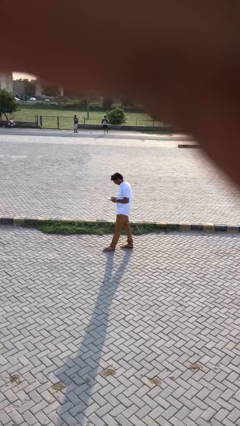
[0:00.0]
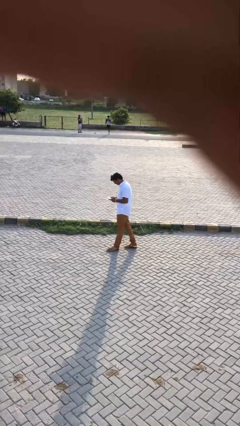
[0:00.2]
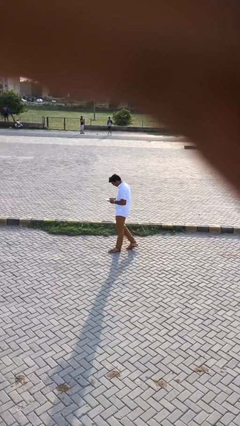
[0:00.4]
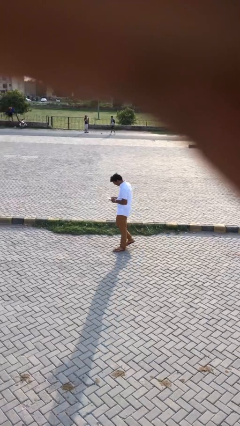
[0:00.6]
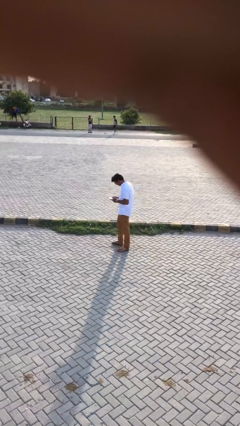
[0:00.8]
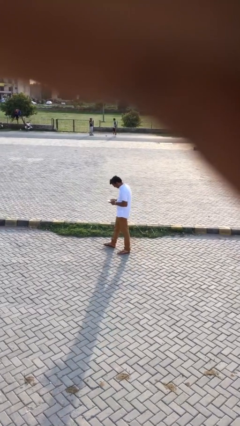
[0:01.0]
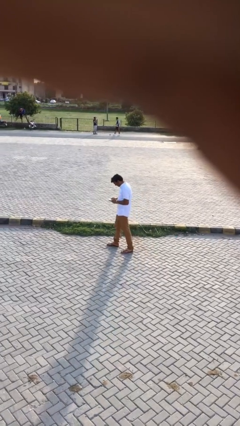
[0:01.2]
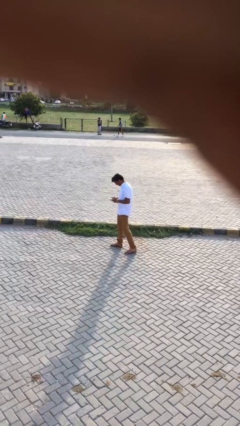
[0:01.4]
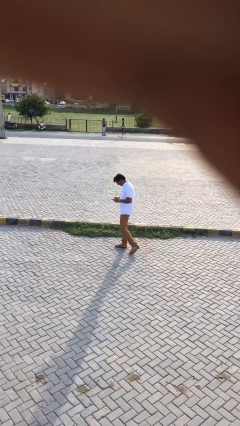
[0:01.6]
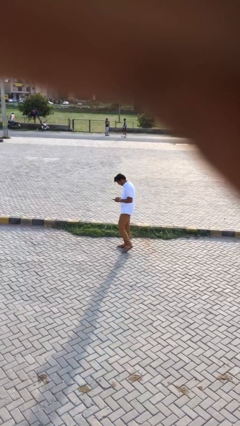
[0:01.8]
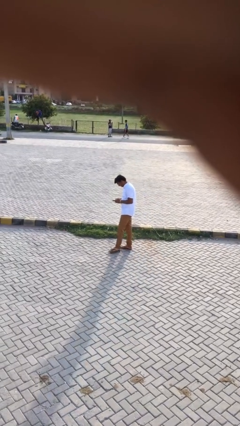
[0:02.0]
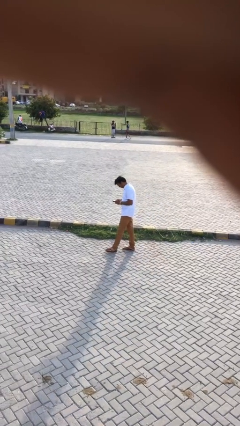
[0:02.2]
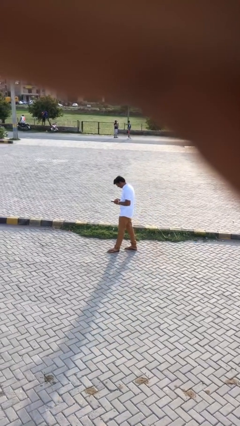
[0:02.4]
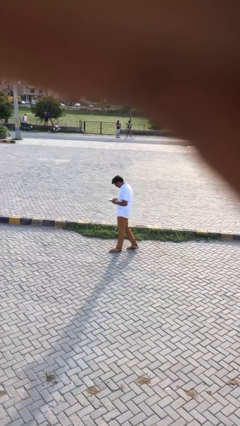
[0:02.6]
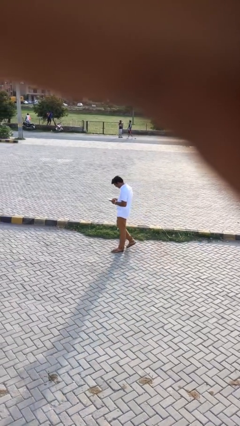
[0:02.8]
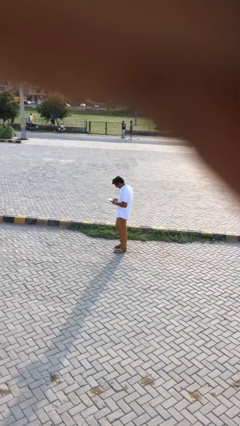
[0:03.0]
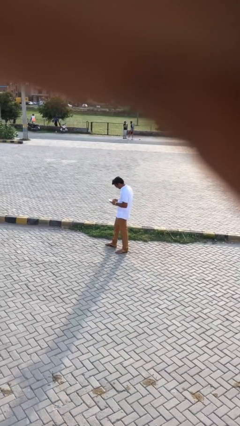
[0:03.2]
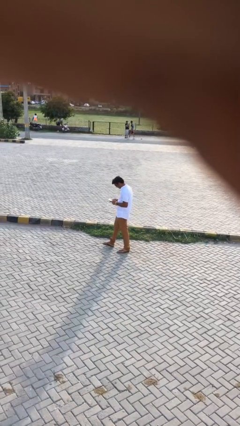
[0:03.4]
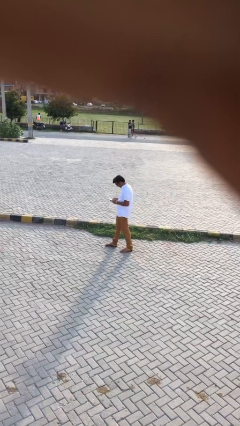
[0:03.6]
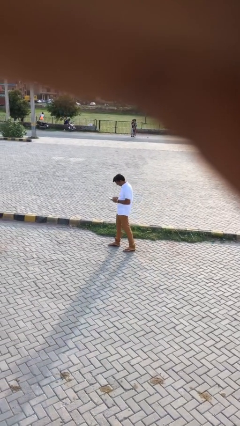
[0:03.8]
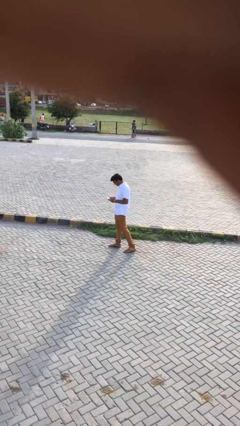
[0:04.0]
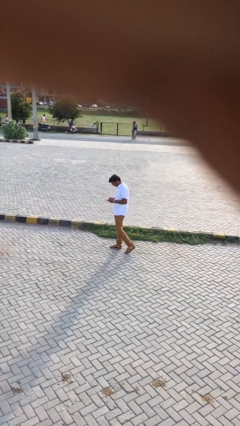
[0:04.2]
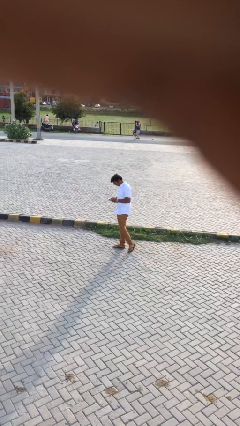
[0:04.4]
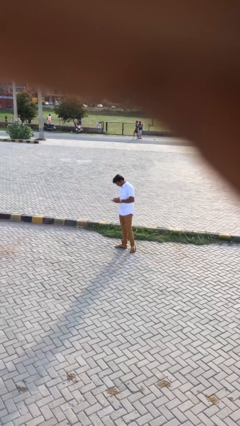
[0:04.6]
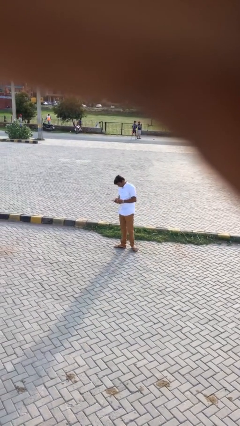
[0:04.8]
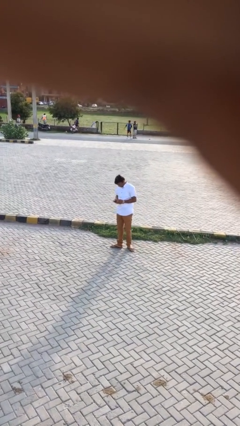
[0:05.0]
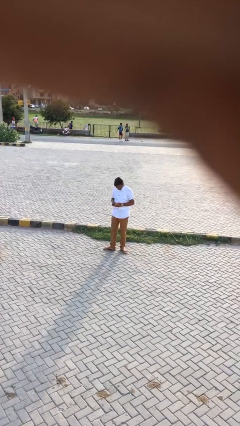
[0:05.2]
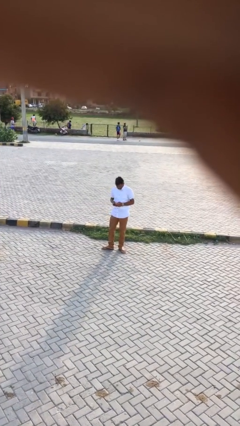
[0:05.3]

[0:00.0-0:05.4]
person texts on phone

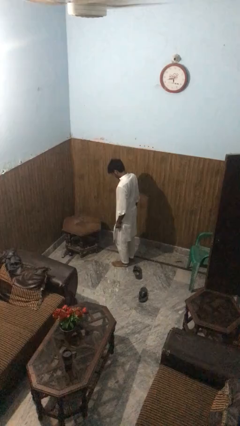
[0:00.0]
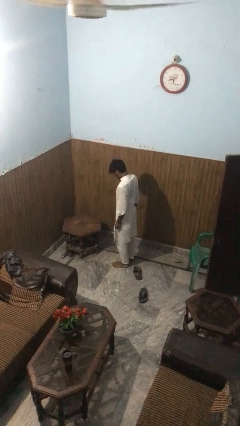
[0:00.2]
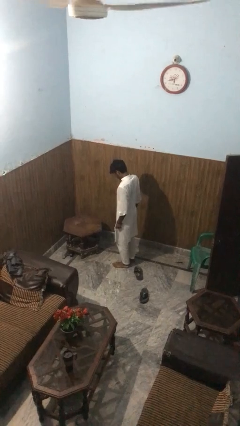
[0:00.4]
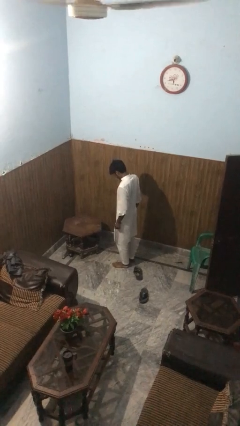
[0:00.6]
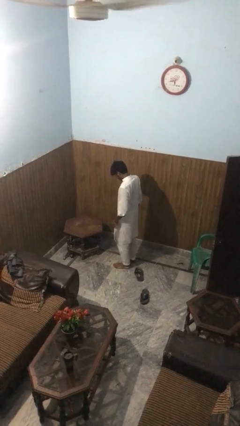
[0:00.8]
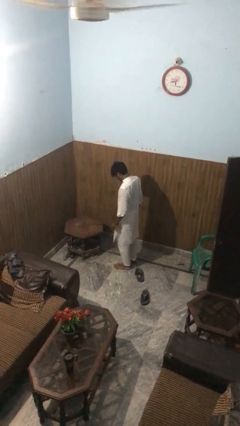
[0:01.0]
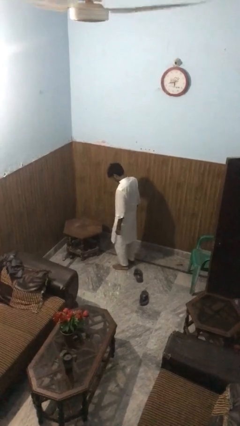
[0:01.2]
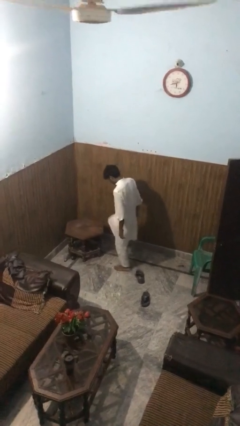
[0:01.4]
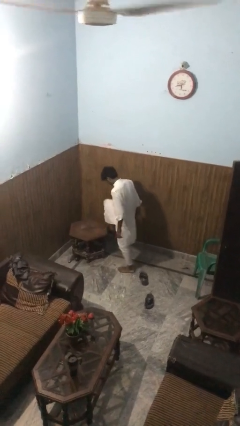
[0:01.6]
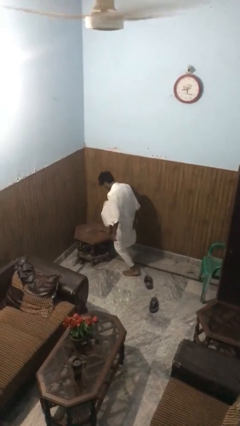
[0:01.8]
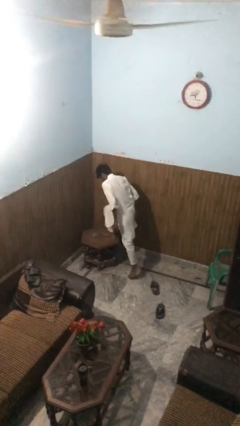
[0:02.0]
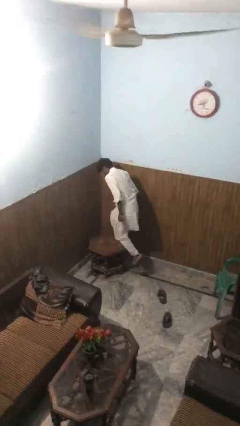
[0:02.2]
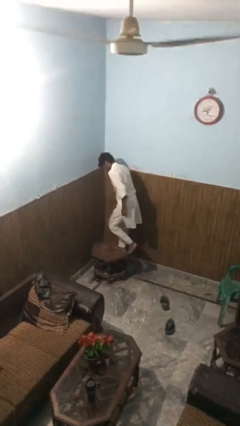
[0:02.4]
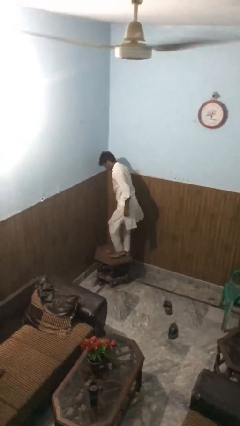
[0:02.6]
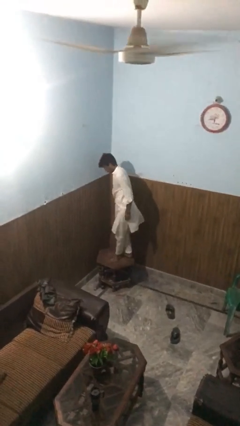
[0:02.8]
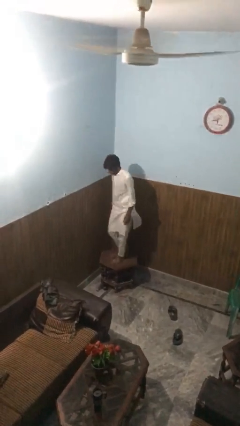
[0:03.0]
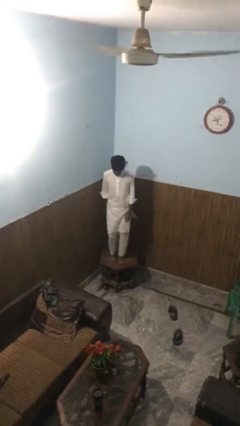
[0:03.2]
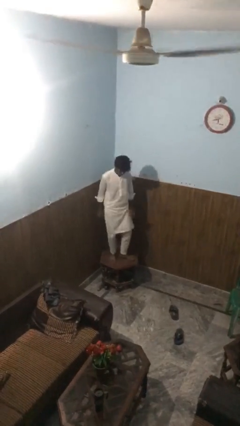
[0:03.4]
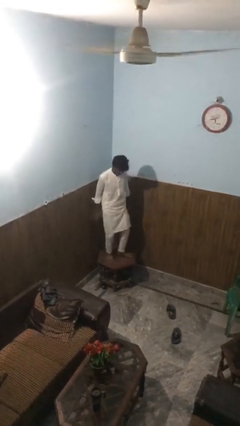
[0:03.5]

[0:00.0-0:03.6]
person climbs on table

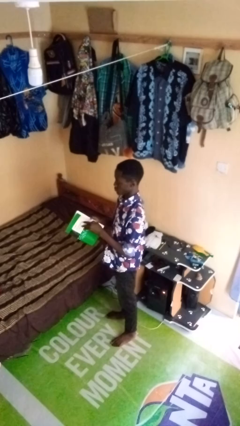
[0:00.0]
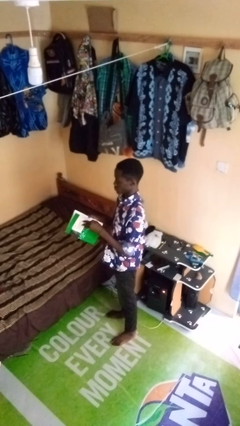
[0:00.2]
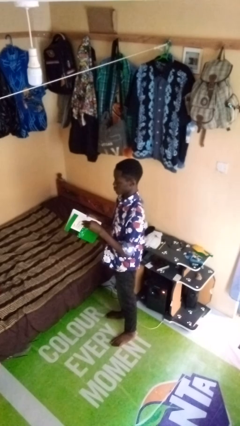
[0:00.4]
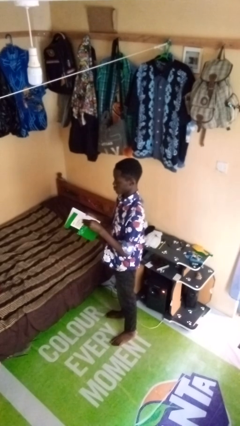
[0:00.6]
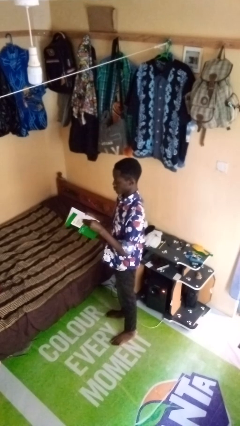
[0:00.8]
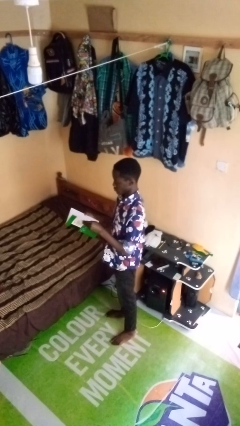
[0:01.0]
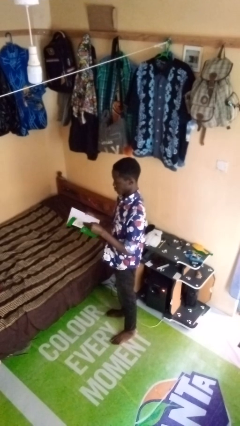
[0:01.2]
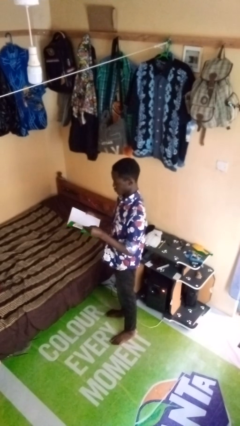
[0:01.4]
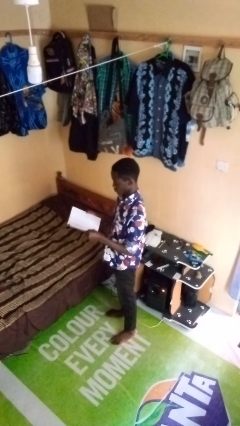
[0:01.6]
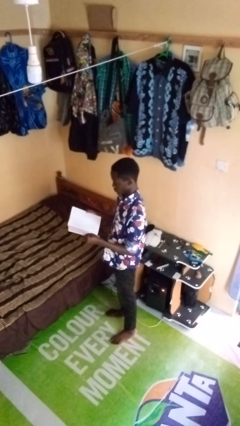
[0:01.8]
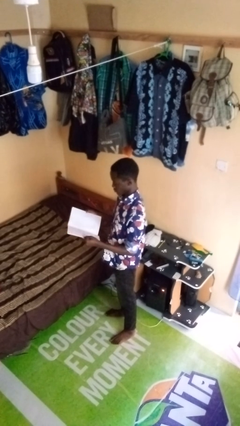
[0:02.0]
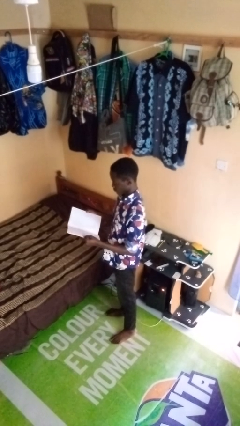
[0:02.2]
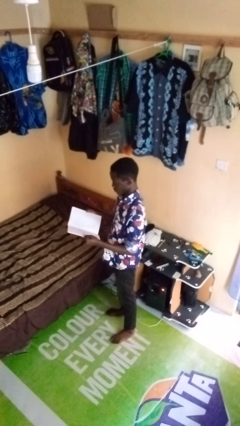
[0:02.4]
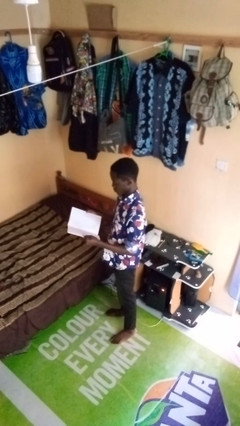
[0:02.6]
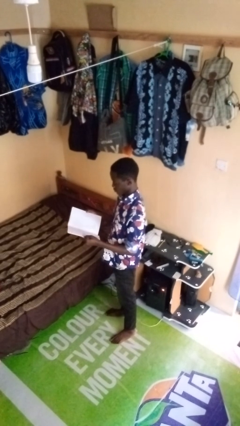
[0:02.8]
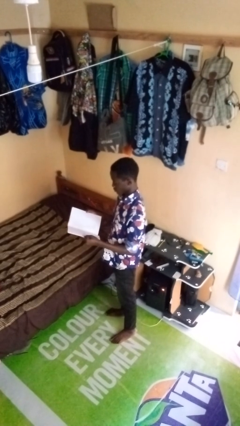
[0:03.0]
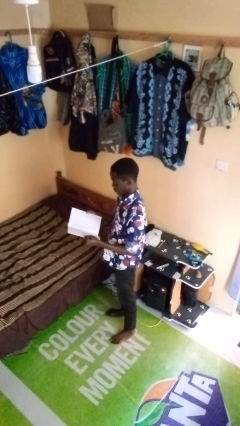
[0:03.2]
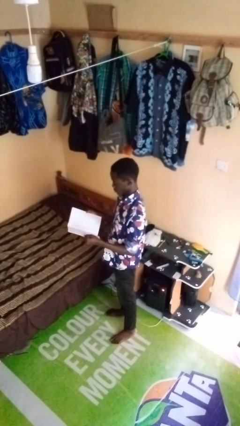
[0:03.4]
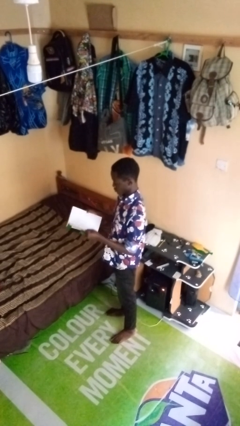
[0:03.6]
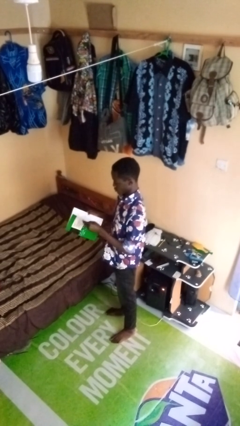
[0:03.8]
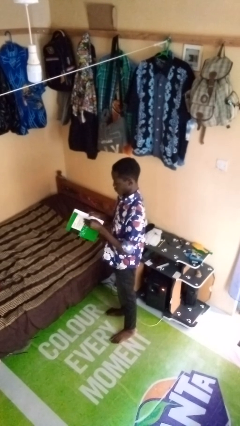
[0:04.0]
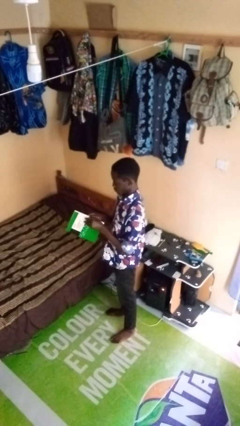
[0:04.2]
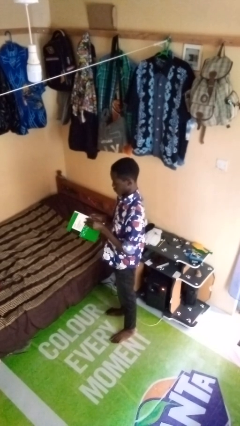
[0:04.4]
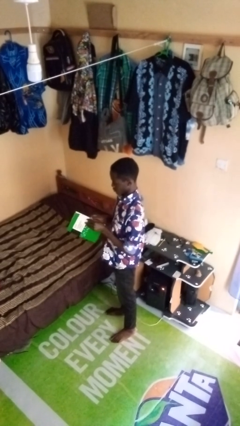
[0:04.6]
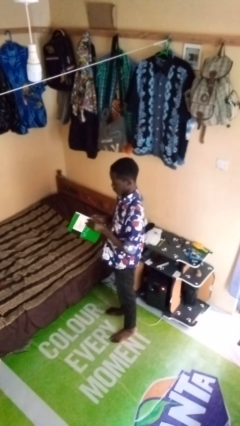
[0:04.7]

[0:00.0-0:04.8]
person reads magazine

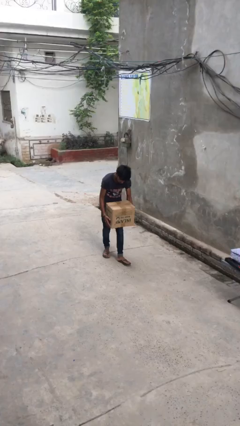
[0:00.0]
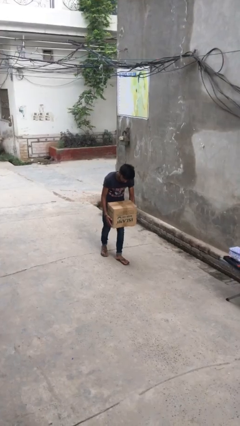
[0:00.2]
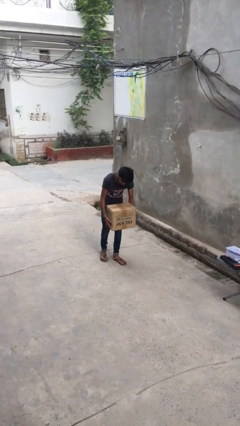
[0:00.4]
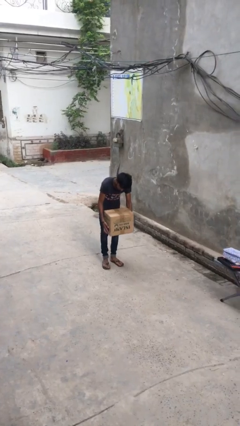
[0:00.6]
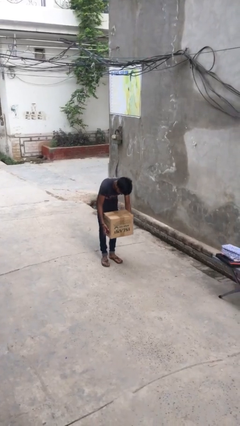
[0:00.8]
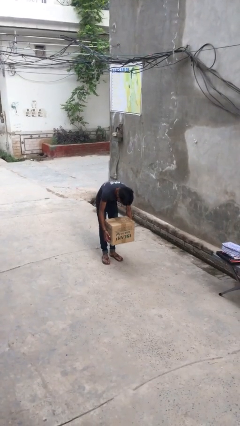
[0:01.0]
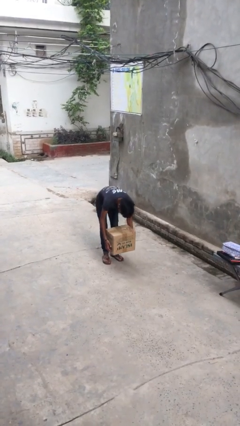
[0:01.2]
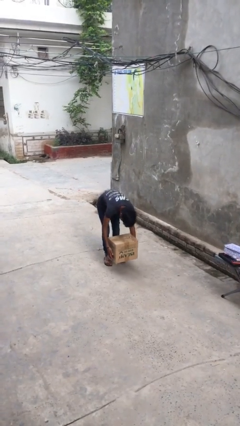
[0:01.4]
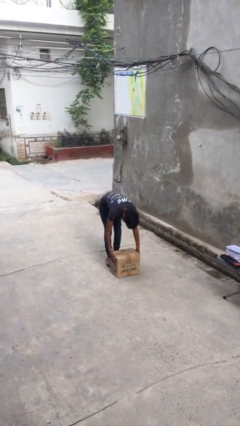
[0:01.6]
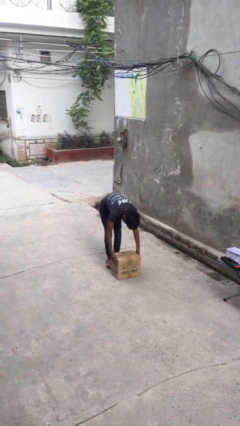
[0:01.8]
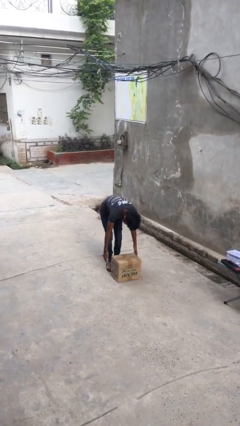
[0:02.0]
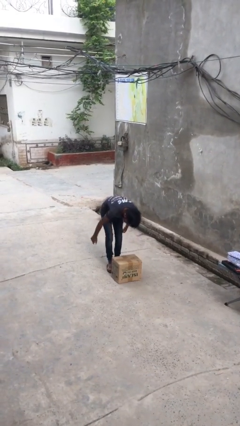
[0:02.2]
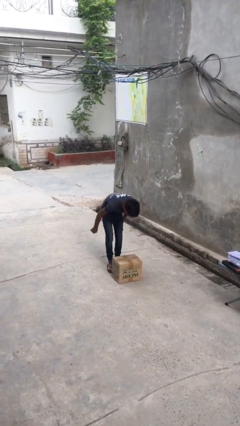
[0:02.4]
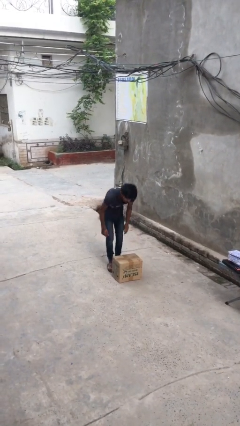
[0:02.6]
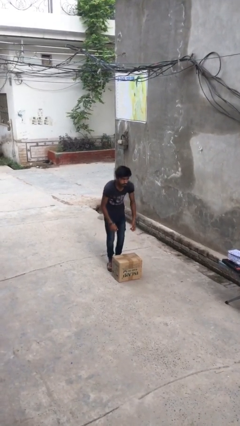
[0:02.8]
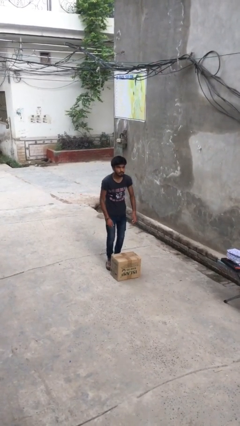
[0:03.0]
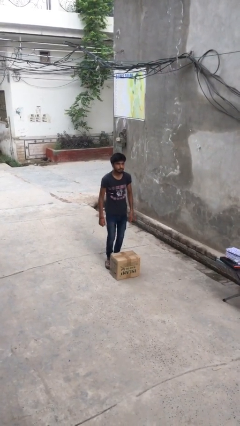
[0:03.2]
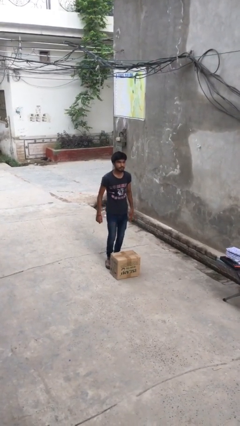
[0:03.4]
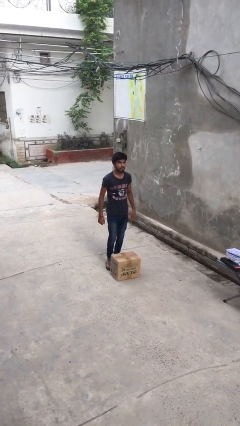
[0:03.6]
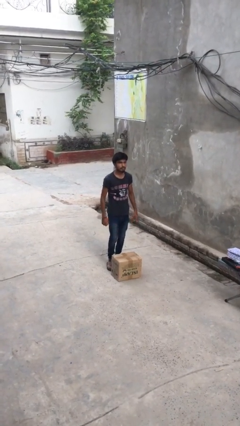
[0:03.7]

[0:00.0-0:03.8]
person puts down object on floor

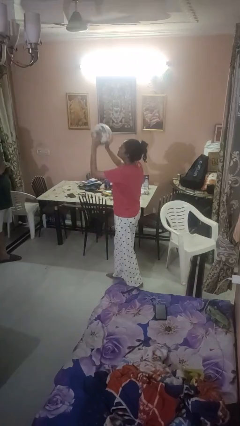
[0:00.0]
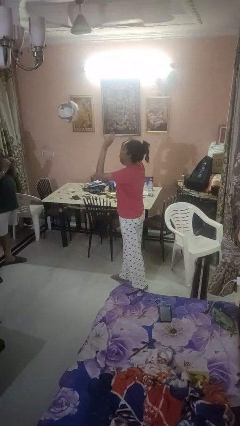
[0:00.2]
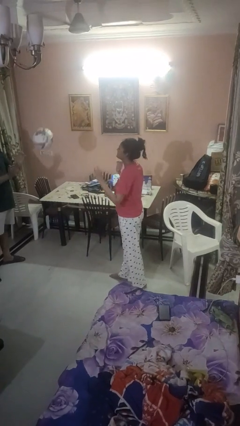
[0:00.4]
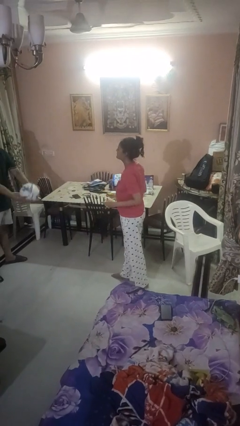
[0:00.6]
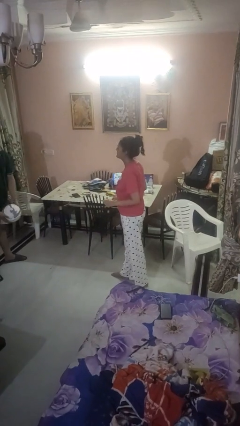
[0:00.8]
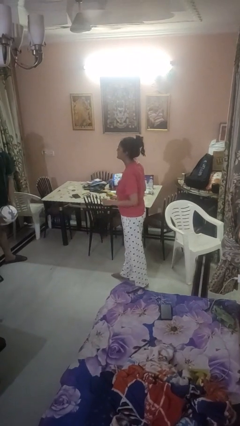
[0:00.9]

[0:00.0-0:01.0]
person throws object to person
